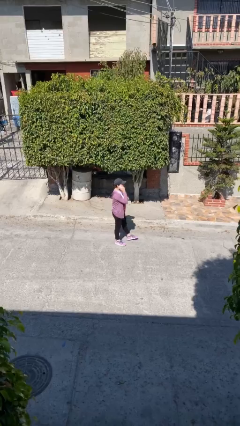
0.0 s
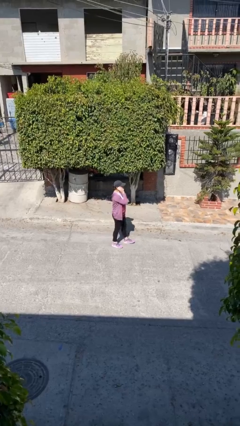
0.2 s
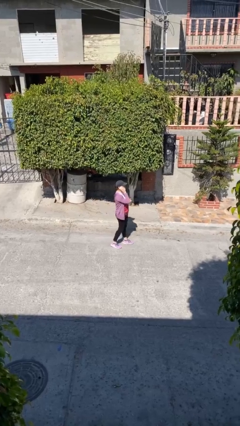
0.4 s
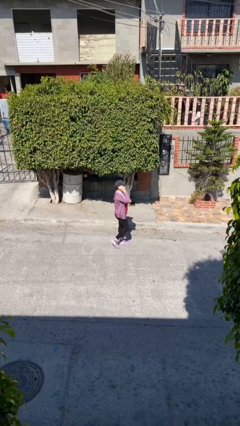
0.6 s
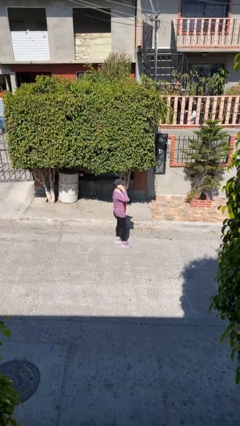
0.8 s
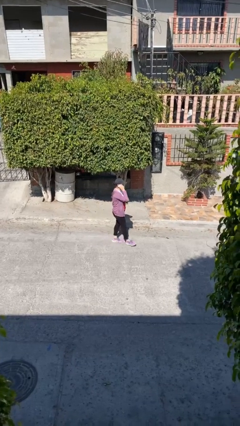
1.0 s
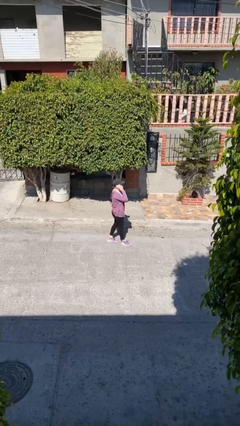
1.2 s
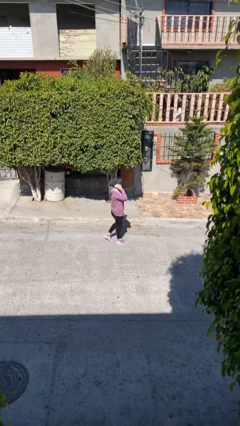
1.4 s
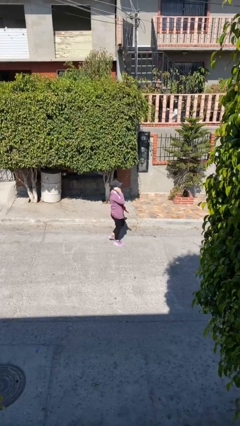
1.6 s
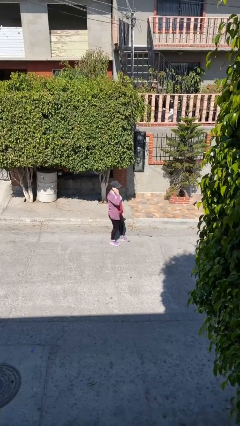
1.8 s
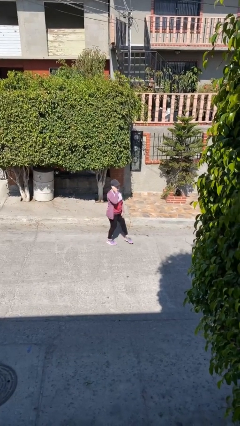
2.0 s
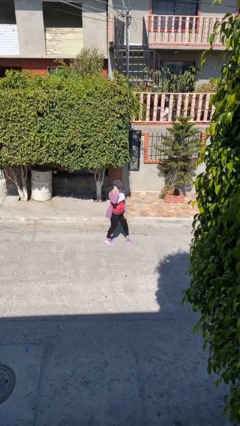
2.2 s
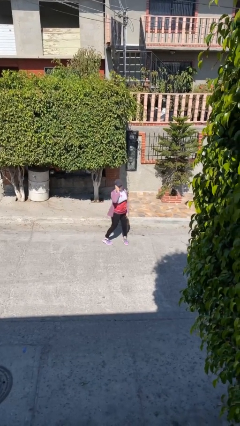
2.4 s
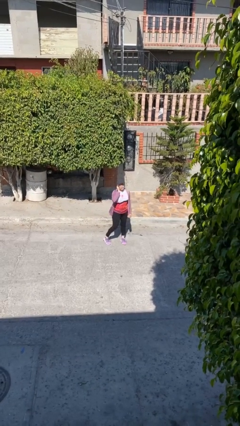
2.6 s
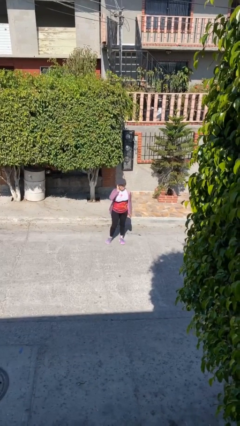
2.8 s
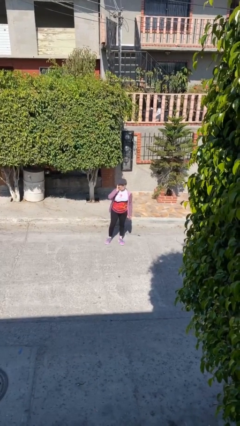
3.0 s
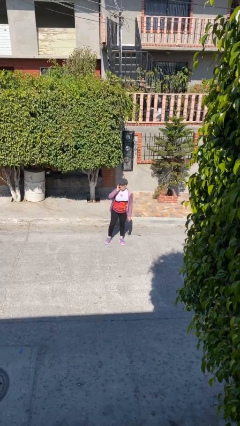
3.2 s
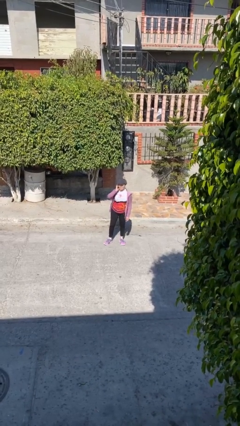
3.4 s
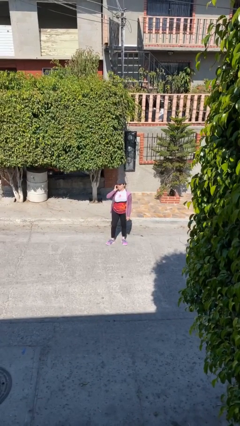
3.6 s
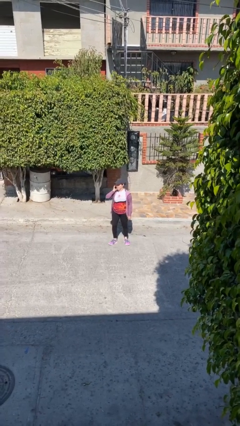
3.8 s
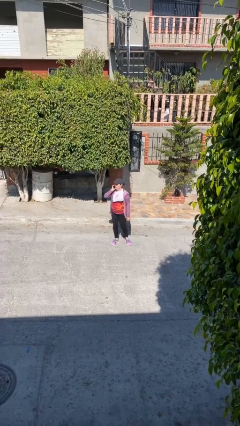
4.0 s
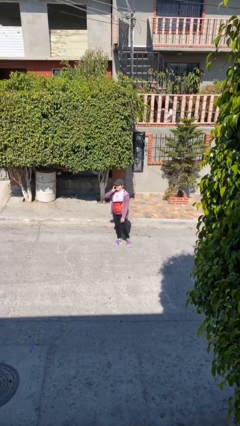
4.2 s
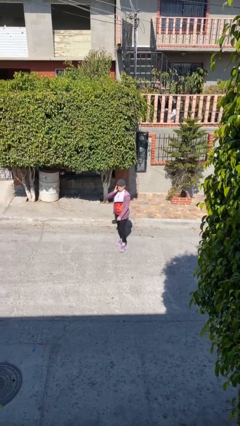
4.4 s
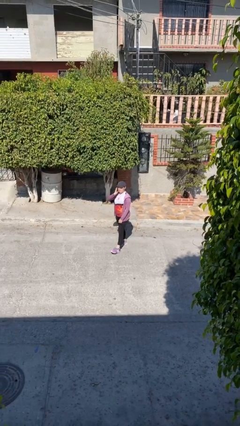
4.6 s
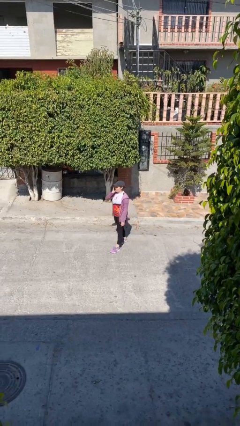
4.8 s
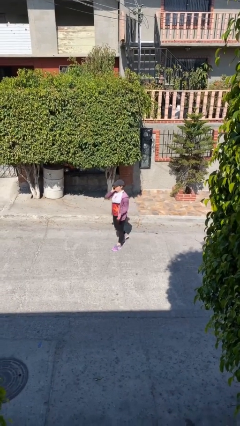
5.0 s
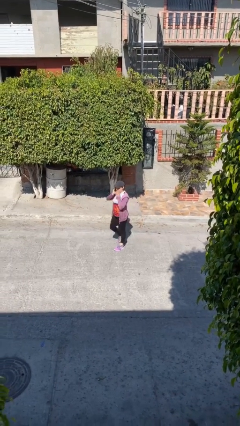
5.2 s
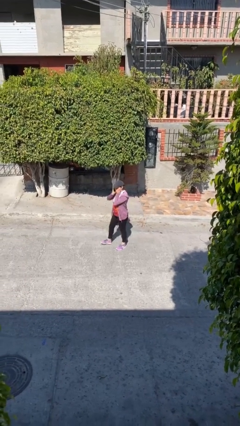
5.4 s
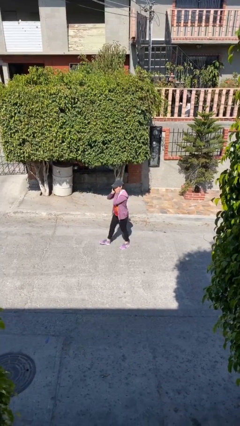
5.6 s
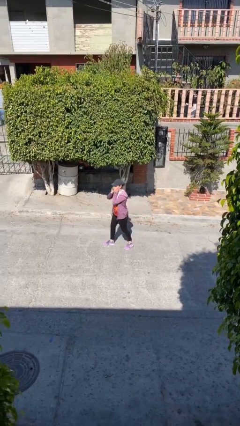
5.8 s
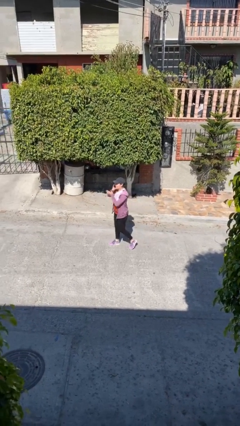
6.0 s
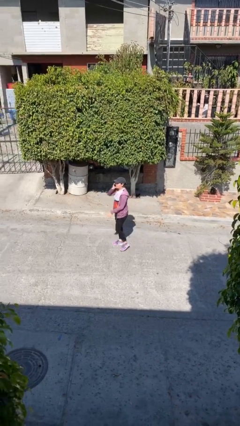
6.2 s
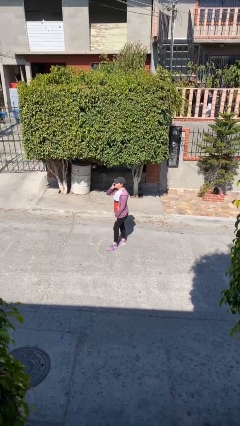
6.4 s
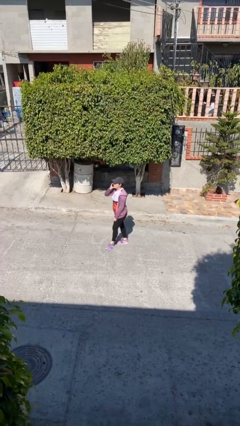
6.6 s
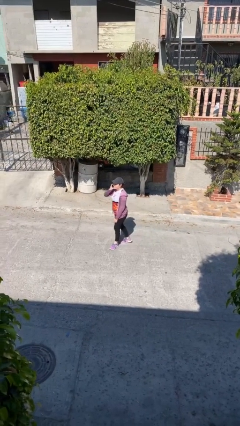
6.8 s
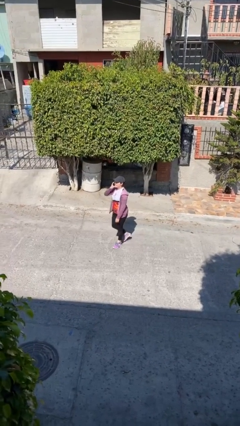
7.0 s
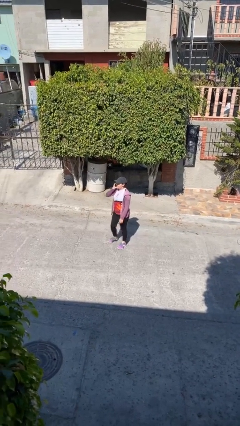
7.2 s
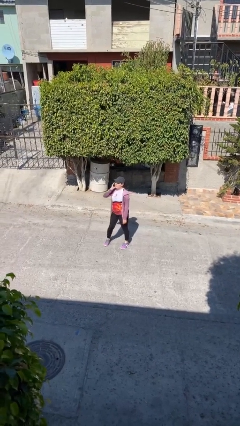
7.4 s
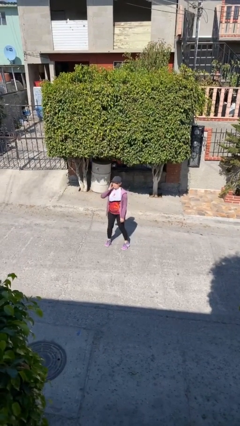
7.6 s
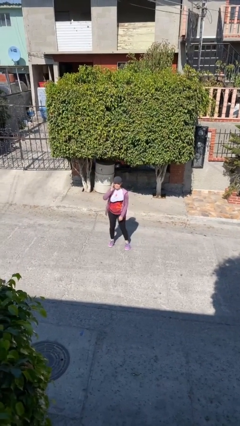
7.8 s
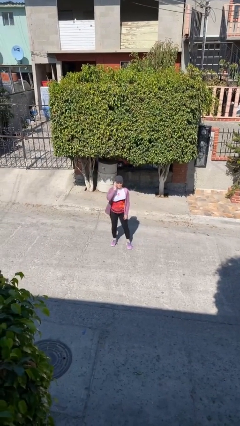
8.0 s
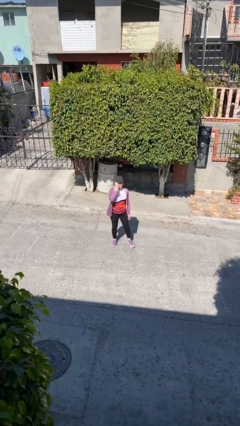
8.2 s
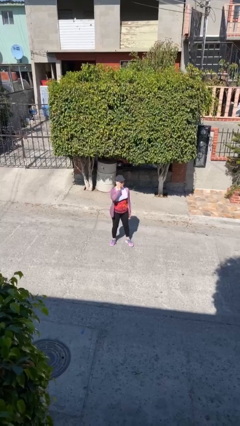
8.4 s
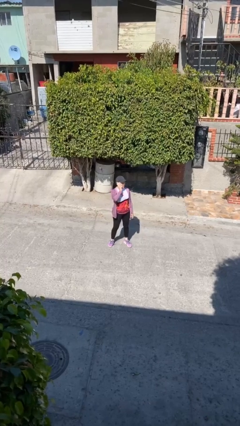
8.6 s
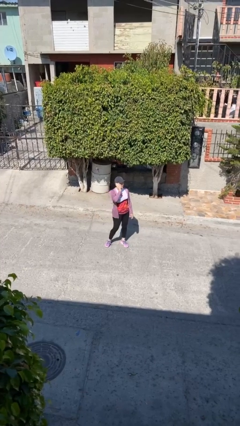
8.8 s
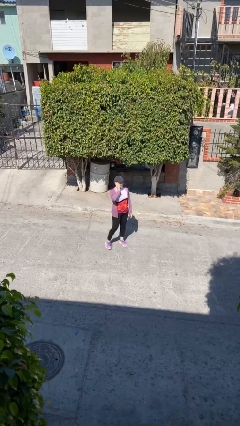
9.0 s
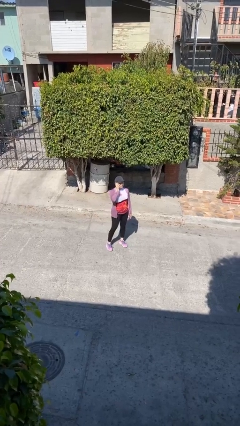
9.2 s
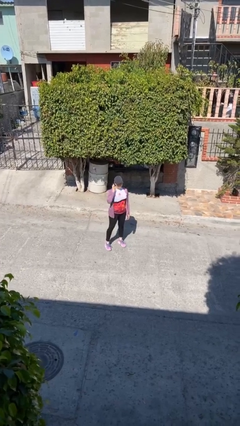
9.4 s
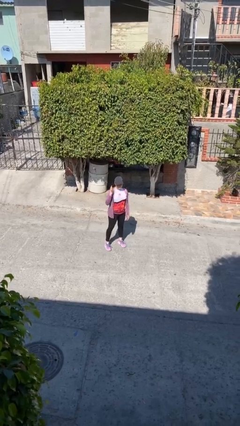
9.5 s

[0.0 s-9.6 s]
person talks on phone

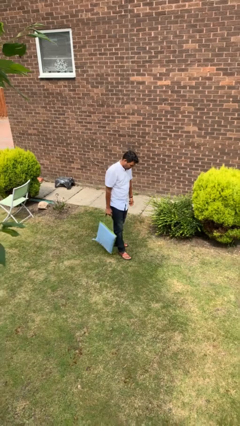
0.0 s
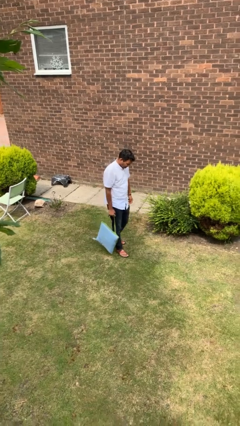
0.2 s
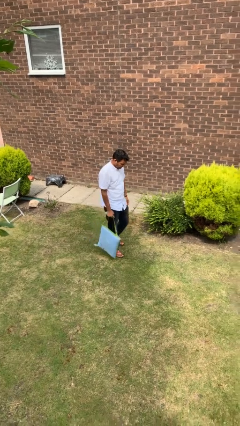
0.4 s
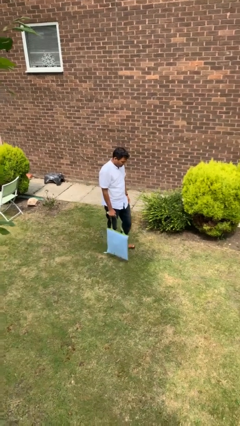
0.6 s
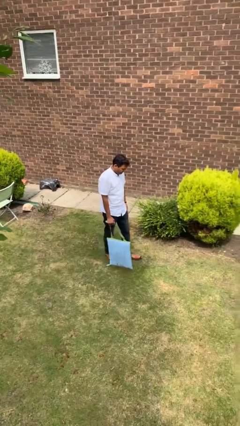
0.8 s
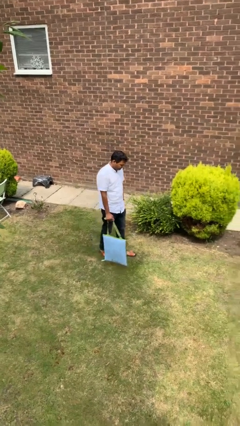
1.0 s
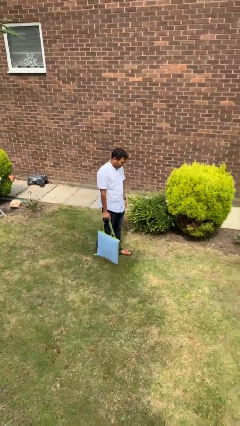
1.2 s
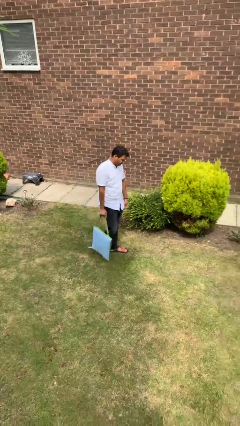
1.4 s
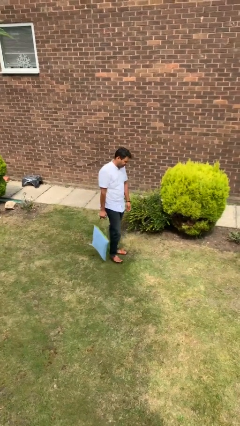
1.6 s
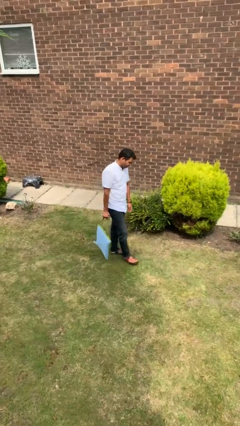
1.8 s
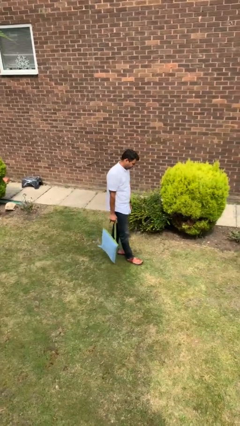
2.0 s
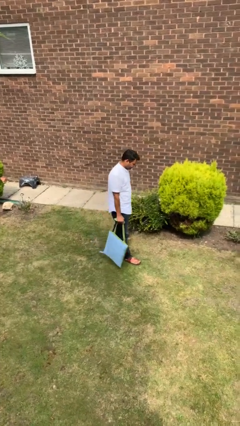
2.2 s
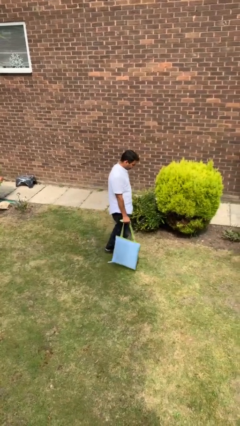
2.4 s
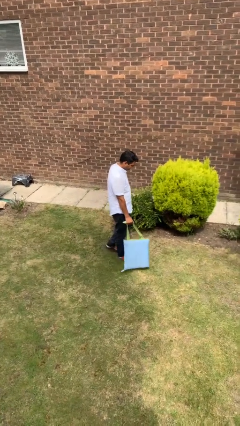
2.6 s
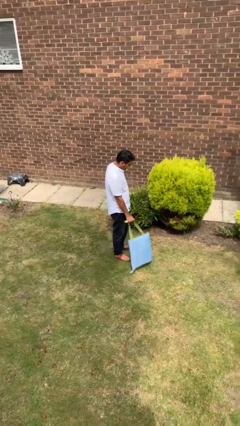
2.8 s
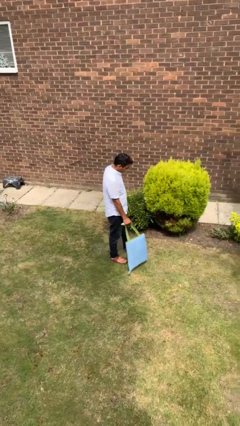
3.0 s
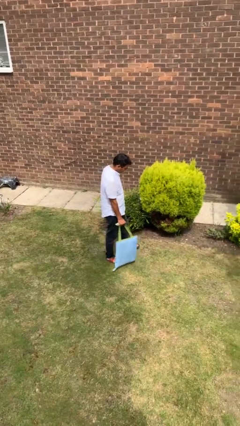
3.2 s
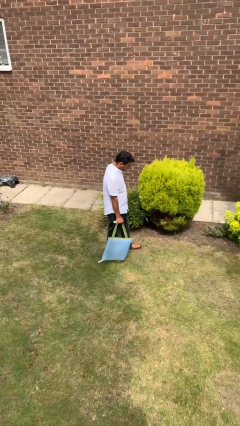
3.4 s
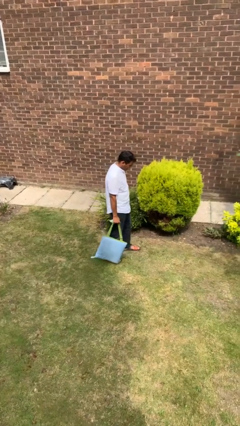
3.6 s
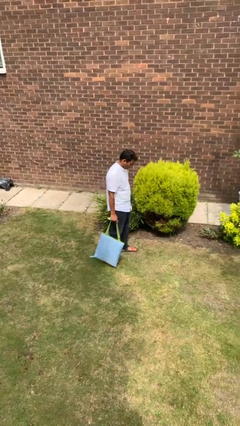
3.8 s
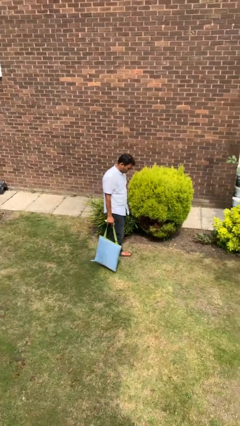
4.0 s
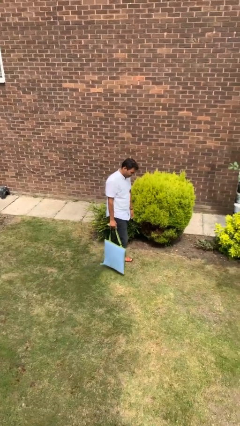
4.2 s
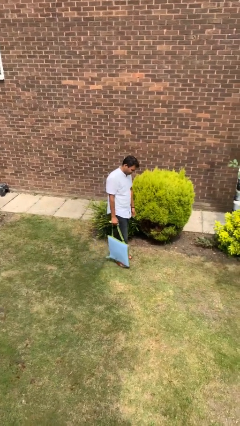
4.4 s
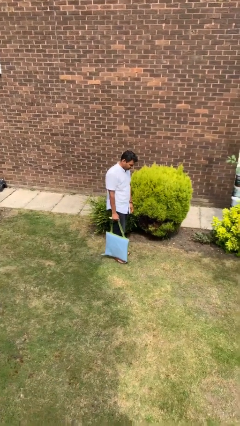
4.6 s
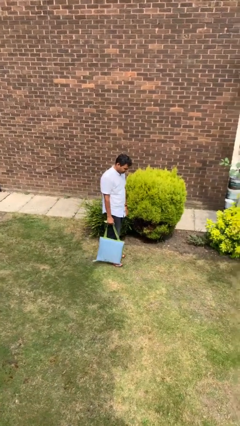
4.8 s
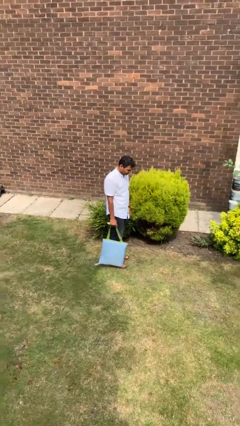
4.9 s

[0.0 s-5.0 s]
person carries groceries

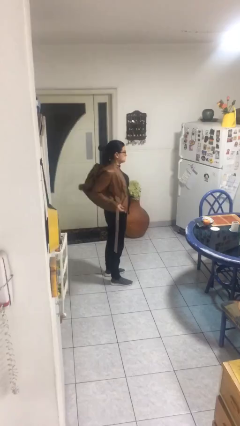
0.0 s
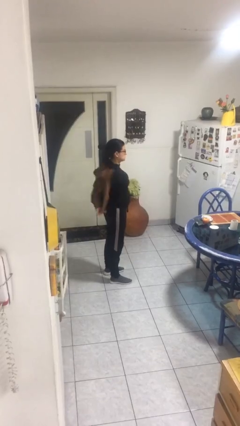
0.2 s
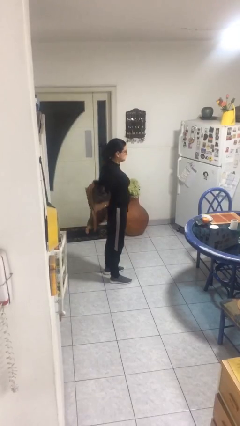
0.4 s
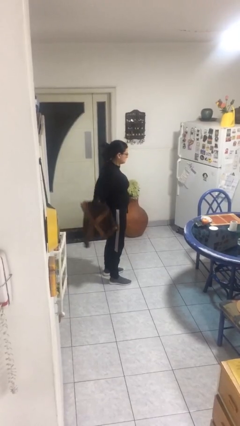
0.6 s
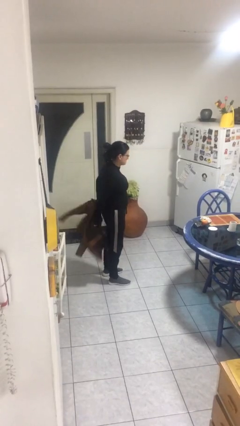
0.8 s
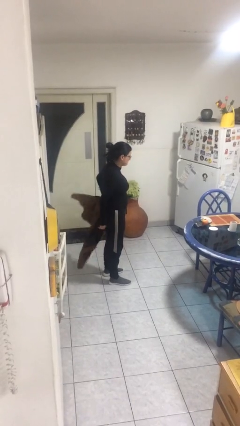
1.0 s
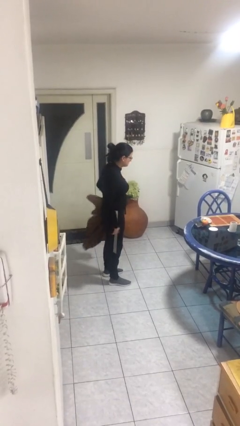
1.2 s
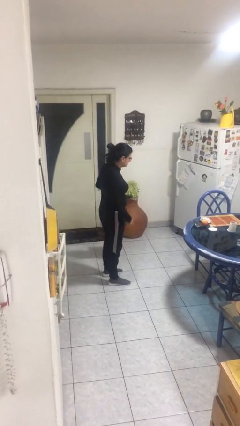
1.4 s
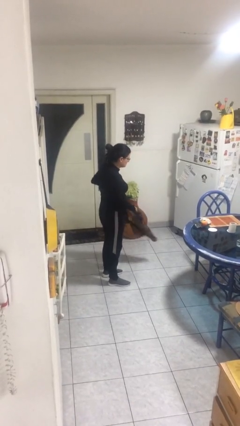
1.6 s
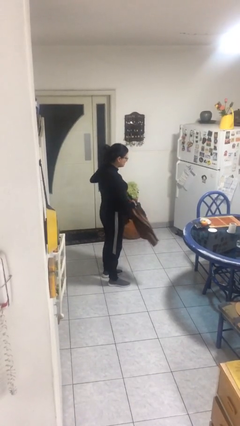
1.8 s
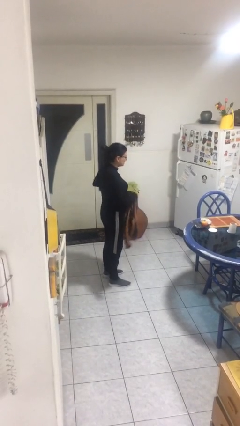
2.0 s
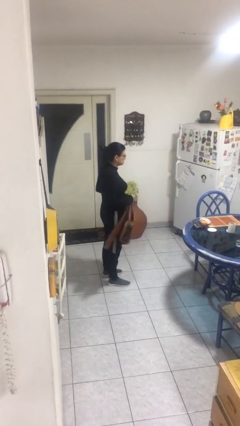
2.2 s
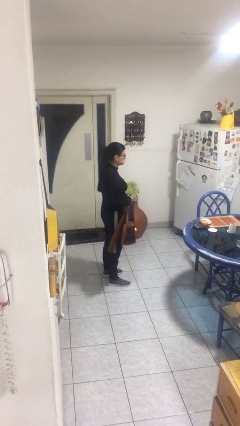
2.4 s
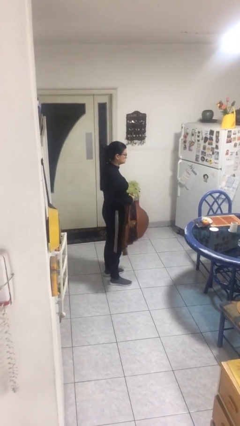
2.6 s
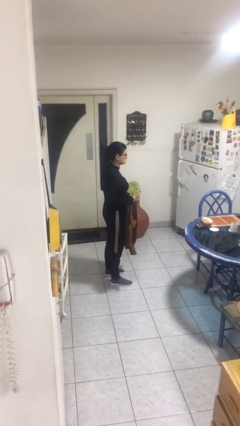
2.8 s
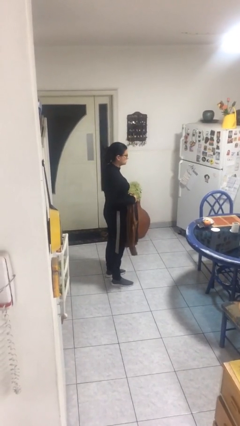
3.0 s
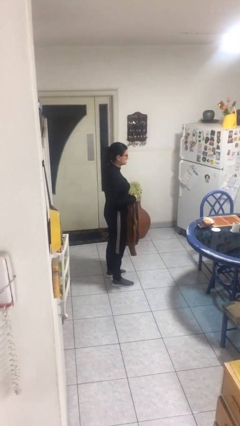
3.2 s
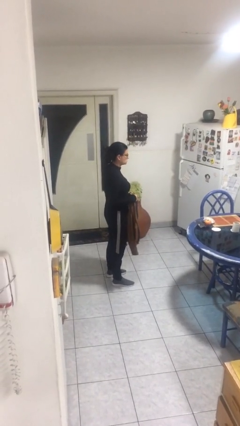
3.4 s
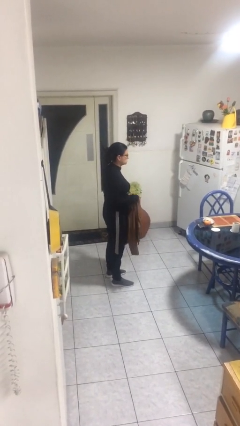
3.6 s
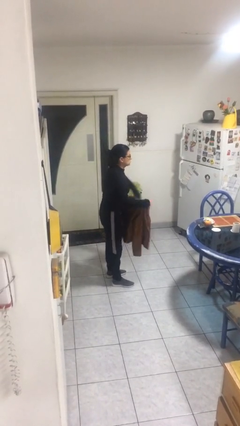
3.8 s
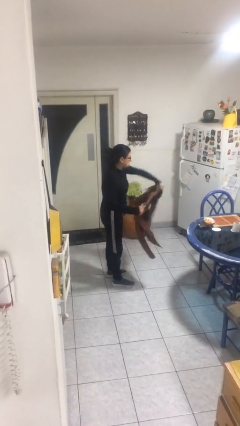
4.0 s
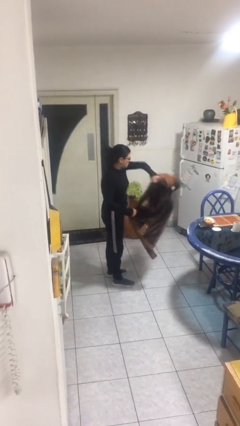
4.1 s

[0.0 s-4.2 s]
person takes off jacket
